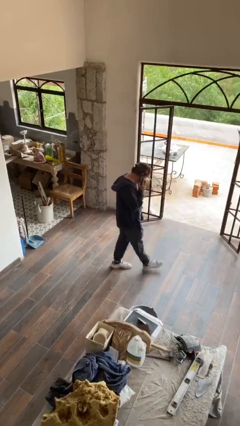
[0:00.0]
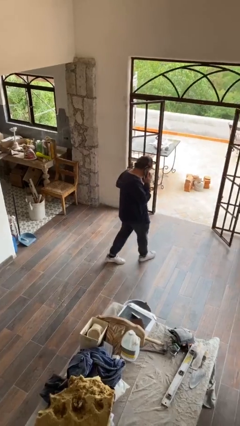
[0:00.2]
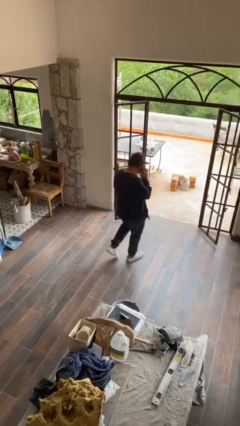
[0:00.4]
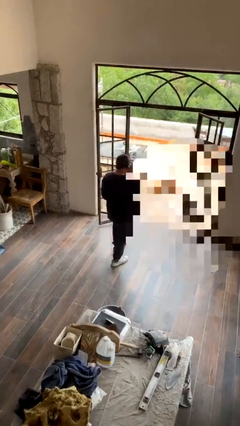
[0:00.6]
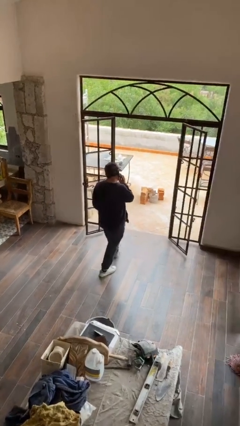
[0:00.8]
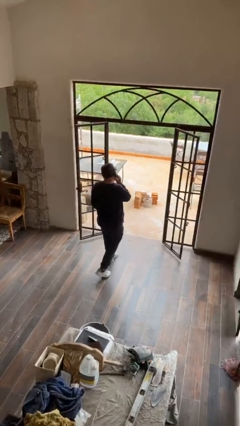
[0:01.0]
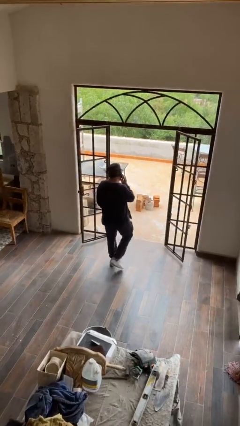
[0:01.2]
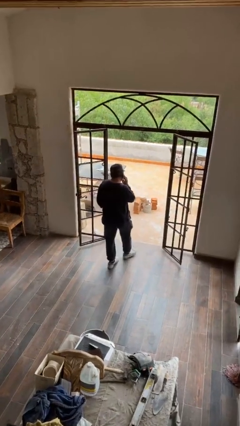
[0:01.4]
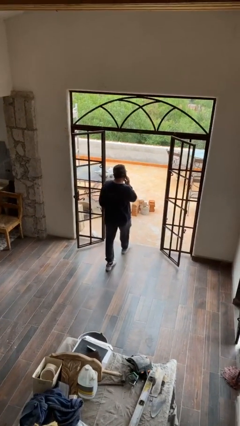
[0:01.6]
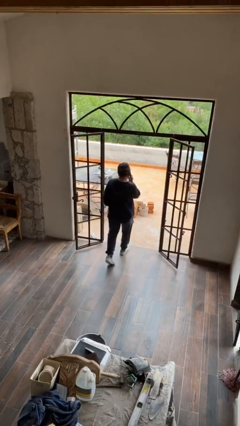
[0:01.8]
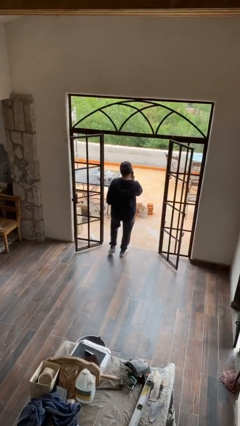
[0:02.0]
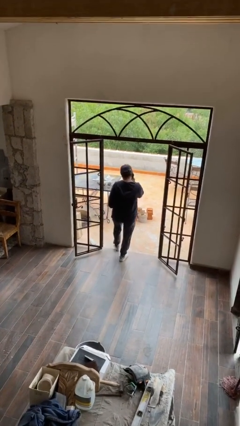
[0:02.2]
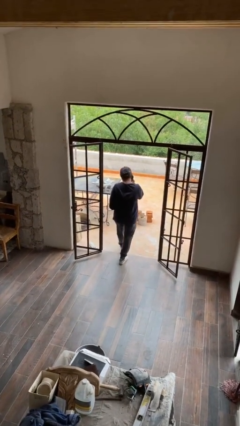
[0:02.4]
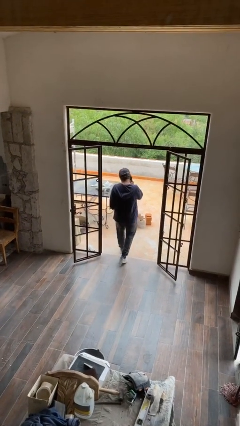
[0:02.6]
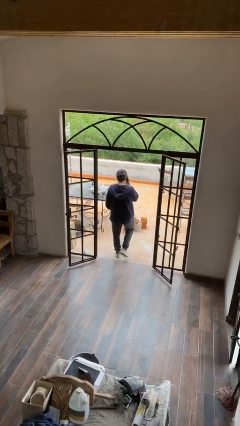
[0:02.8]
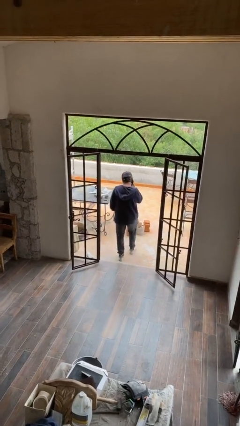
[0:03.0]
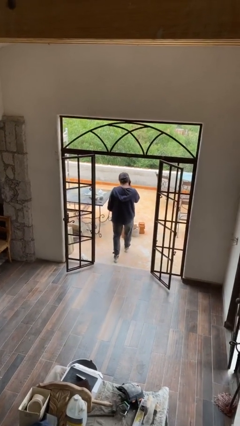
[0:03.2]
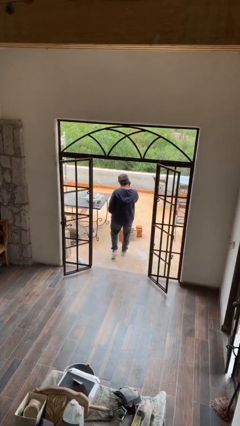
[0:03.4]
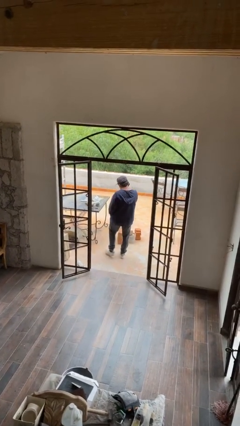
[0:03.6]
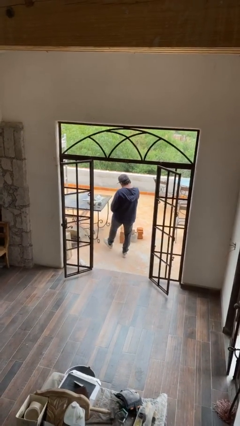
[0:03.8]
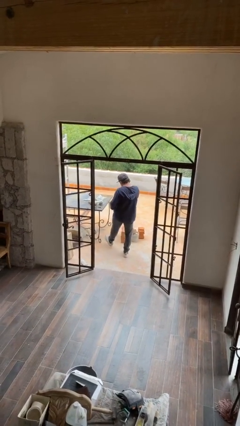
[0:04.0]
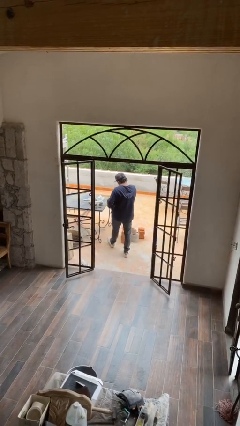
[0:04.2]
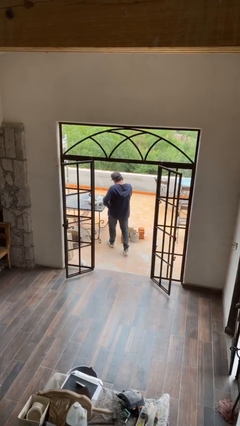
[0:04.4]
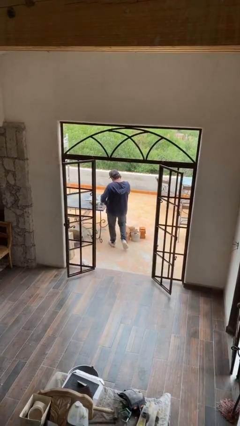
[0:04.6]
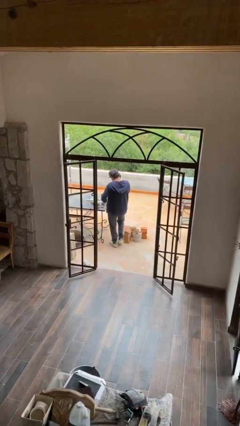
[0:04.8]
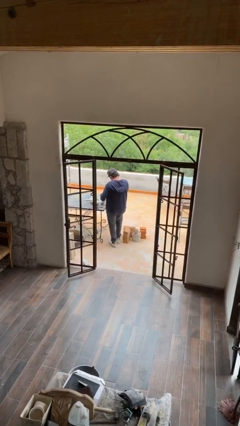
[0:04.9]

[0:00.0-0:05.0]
person exits scene through structure

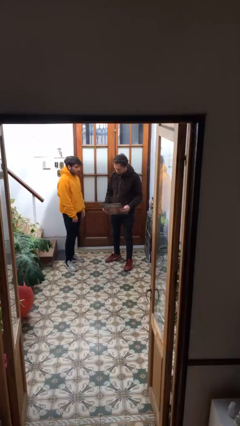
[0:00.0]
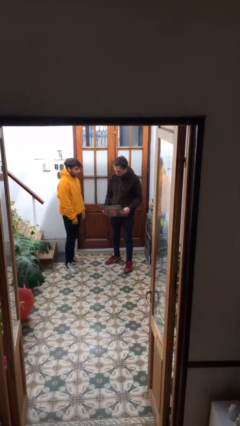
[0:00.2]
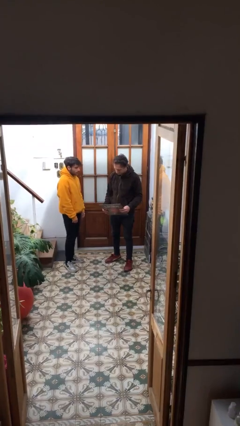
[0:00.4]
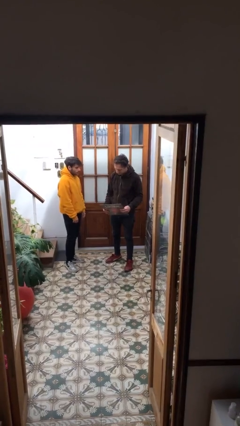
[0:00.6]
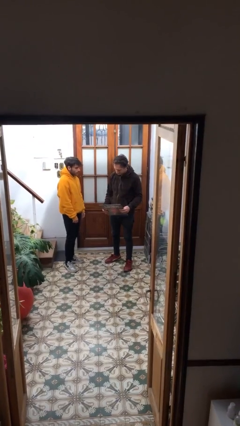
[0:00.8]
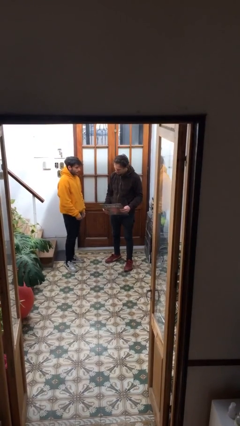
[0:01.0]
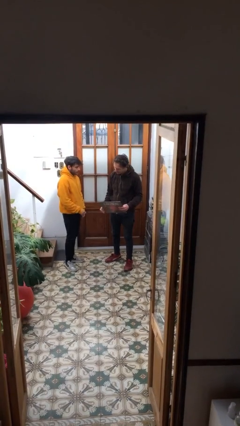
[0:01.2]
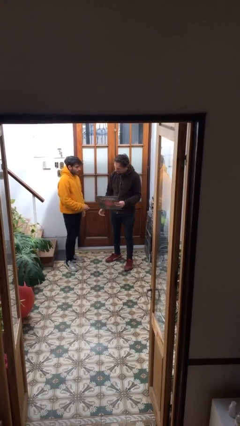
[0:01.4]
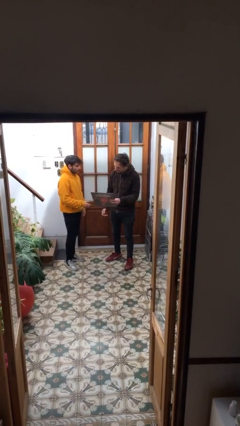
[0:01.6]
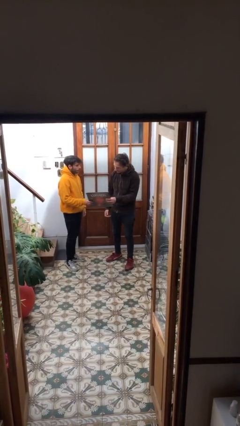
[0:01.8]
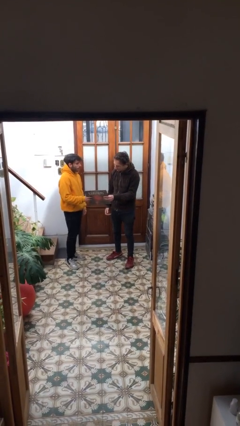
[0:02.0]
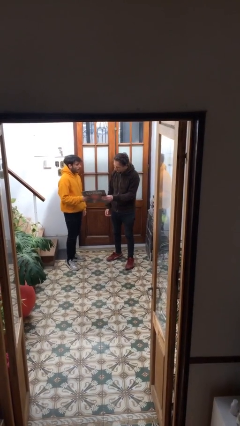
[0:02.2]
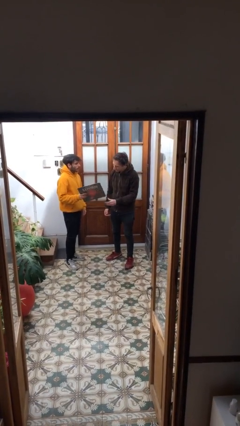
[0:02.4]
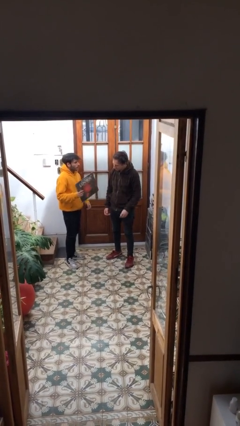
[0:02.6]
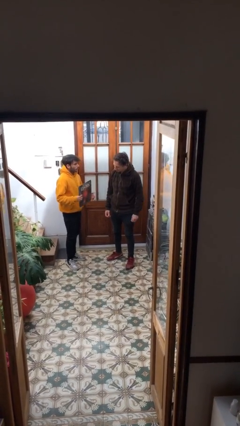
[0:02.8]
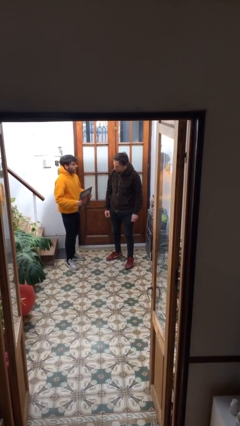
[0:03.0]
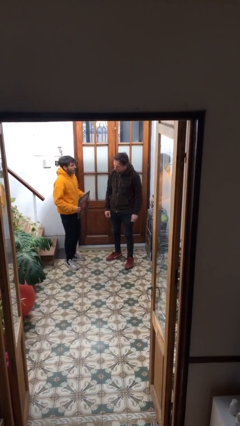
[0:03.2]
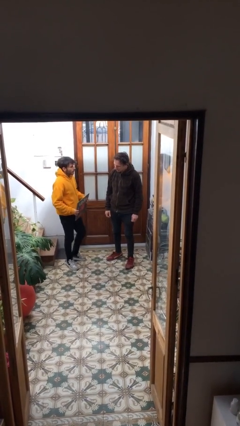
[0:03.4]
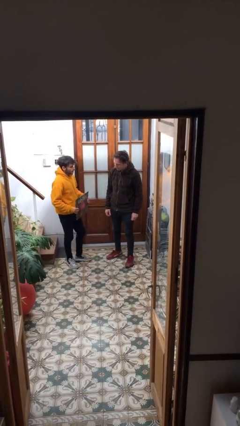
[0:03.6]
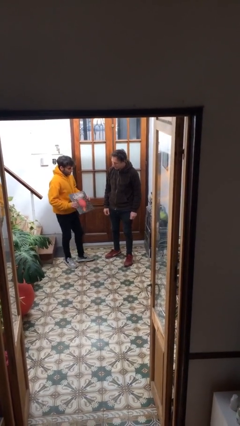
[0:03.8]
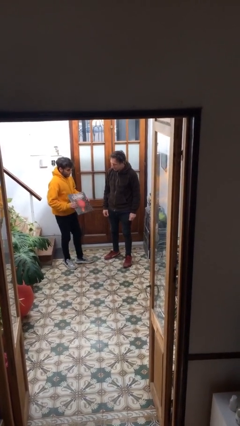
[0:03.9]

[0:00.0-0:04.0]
person transfers object to person

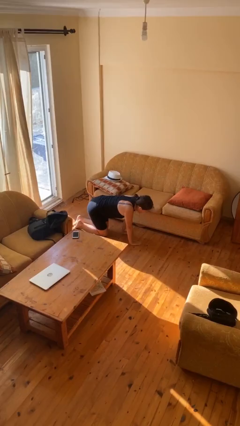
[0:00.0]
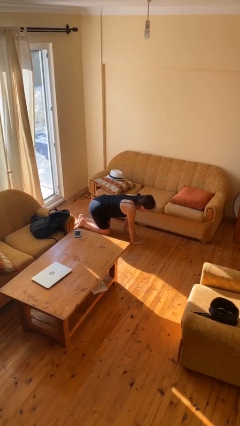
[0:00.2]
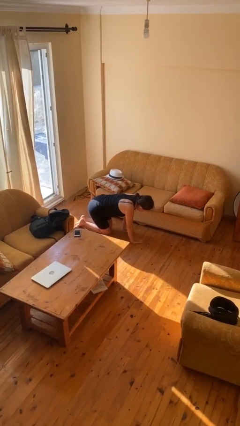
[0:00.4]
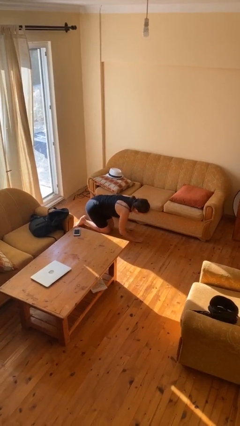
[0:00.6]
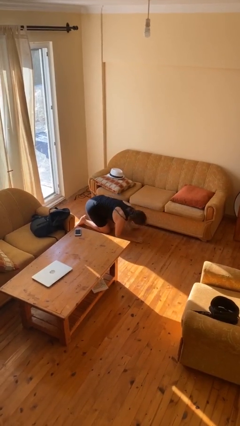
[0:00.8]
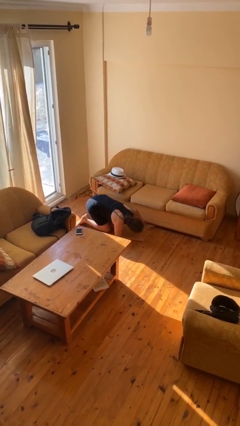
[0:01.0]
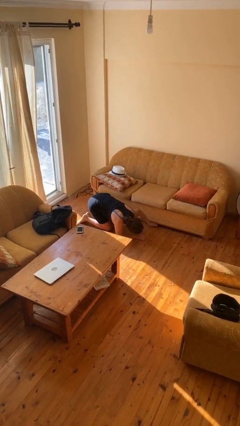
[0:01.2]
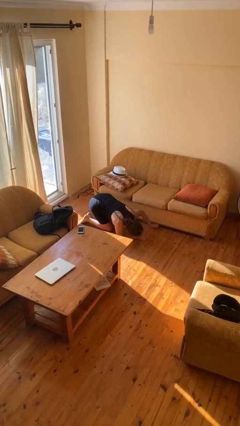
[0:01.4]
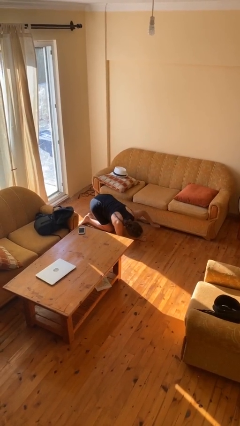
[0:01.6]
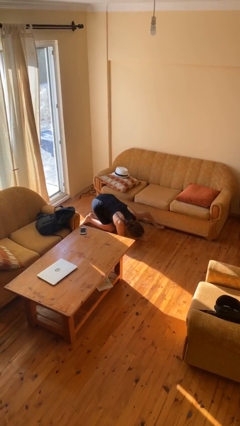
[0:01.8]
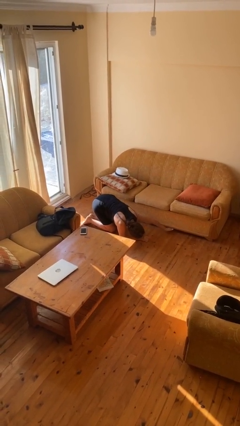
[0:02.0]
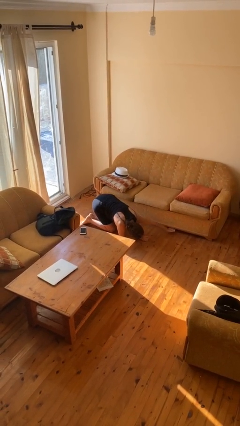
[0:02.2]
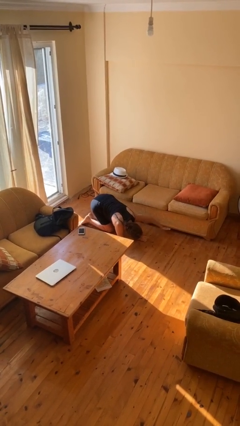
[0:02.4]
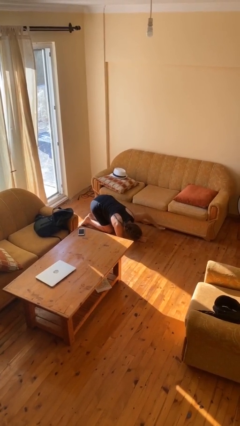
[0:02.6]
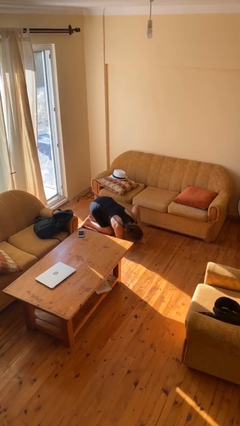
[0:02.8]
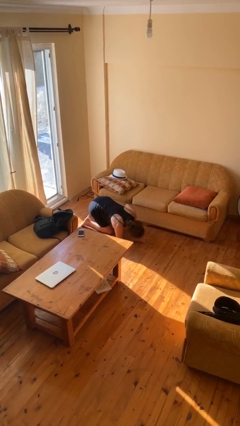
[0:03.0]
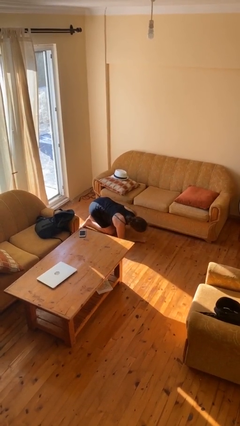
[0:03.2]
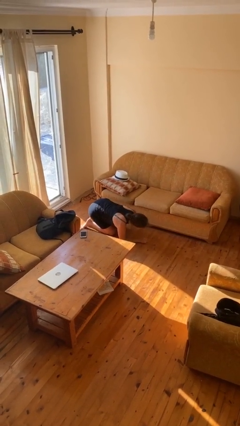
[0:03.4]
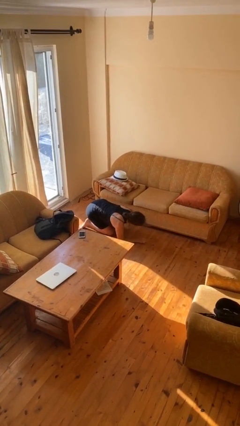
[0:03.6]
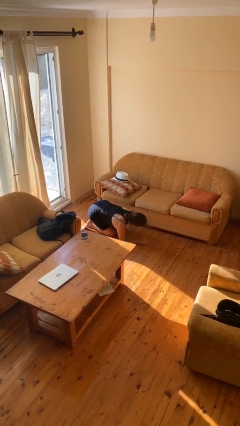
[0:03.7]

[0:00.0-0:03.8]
person searches under couch

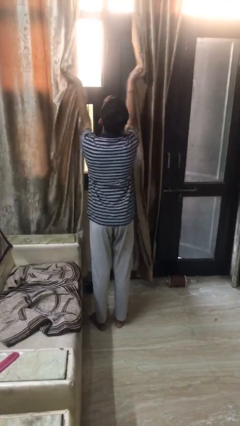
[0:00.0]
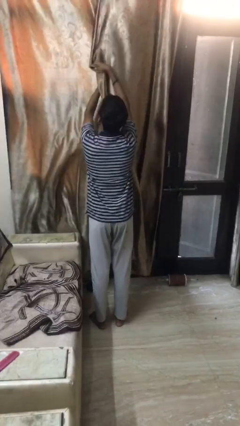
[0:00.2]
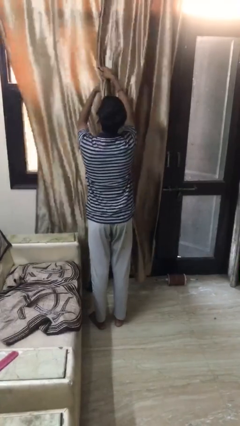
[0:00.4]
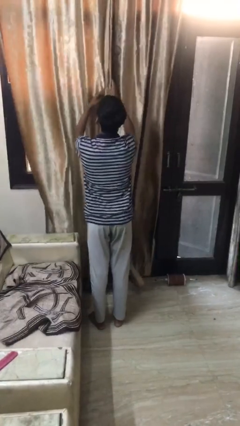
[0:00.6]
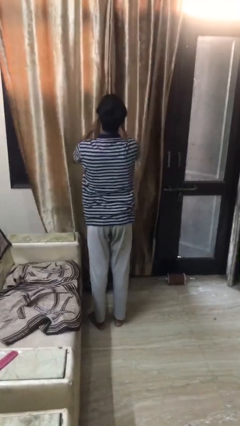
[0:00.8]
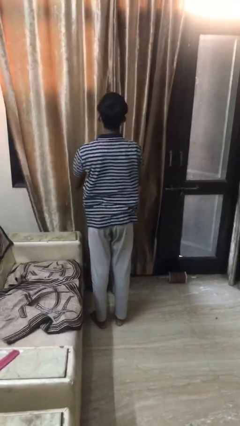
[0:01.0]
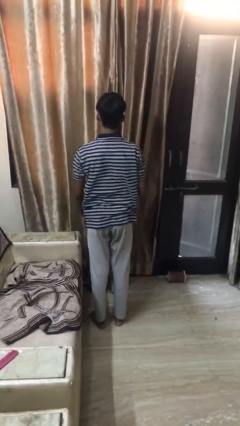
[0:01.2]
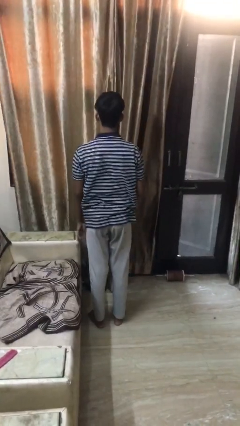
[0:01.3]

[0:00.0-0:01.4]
person closes curtains

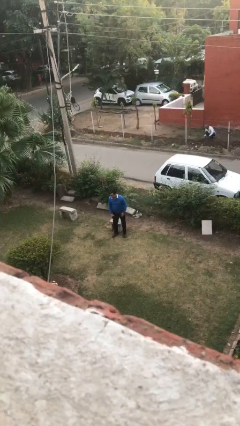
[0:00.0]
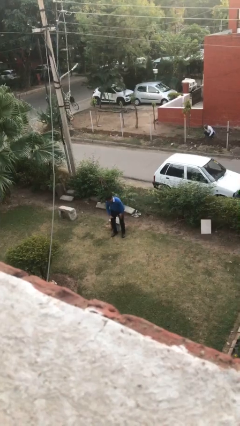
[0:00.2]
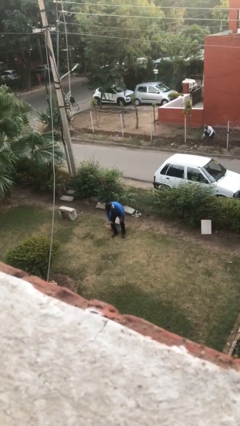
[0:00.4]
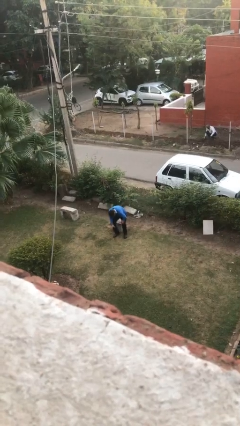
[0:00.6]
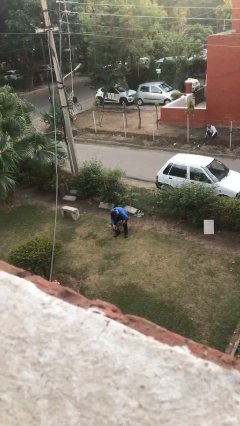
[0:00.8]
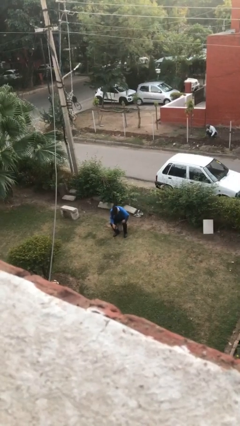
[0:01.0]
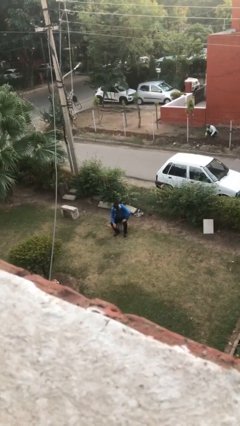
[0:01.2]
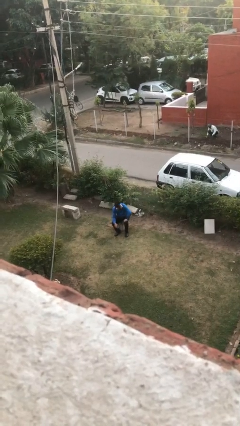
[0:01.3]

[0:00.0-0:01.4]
person sits down

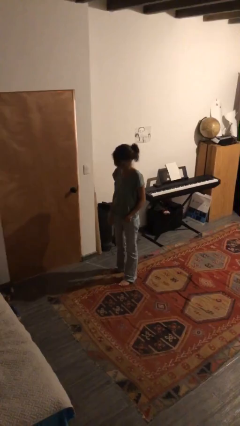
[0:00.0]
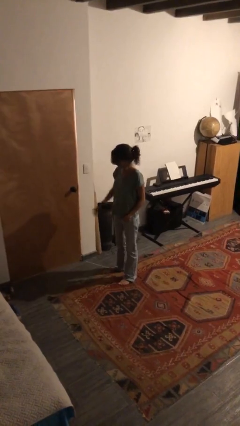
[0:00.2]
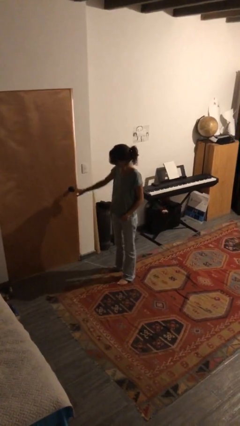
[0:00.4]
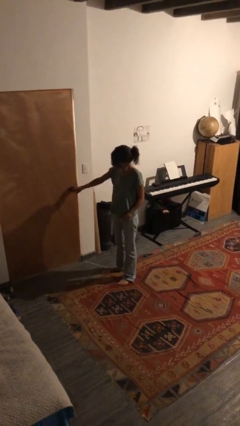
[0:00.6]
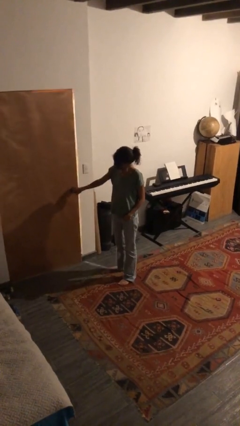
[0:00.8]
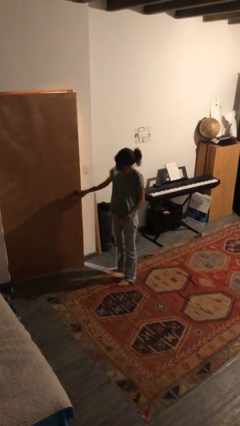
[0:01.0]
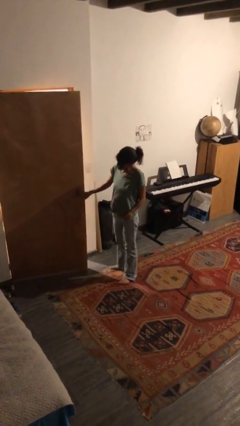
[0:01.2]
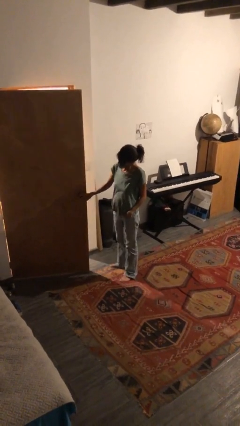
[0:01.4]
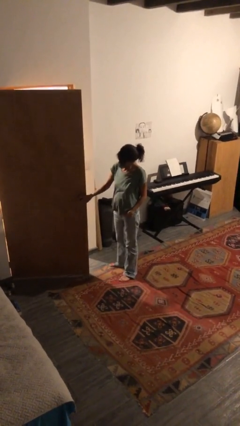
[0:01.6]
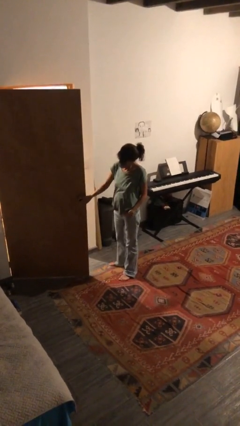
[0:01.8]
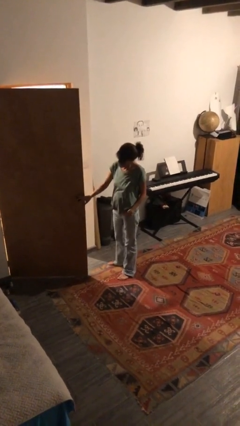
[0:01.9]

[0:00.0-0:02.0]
person opens facility door
